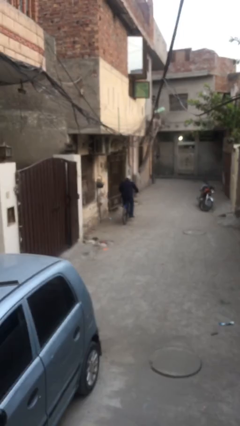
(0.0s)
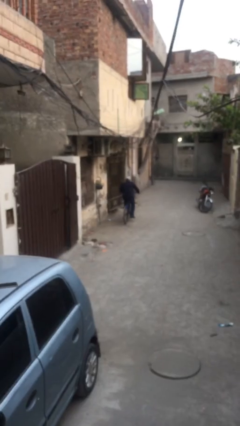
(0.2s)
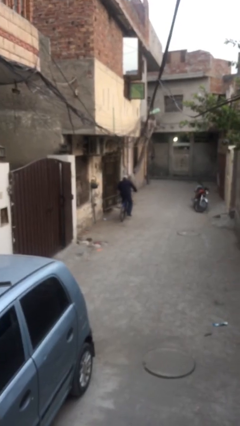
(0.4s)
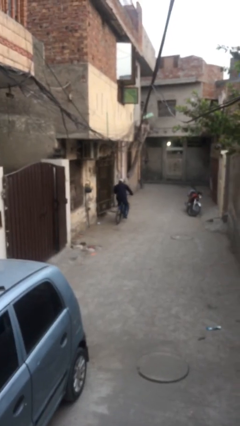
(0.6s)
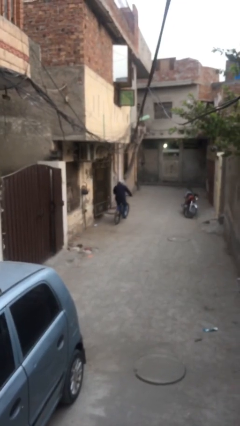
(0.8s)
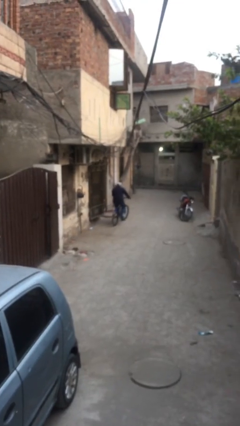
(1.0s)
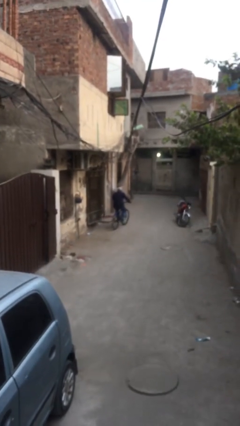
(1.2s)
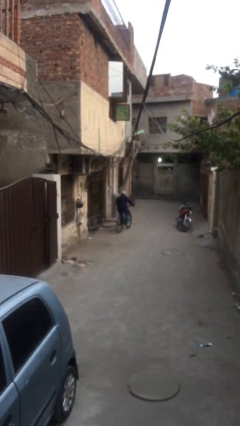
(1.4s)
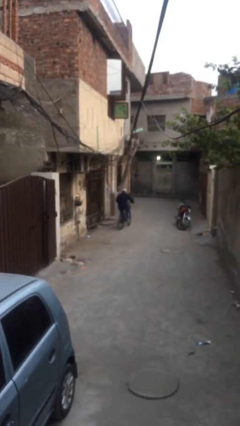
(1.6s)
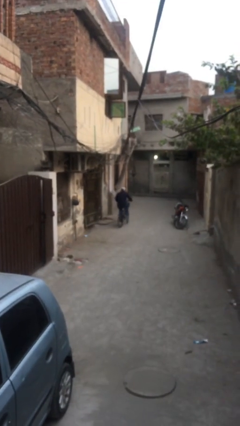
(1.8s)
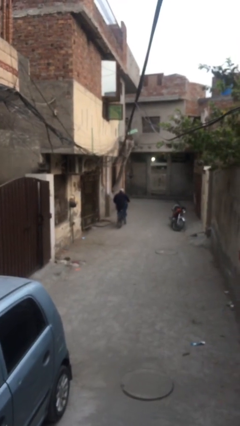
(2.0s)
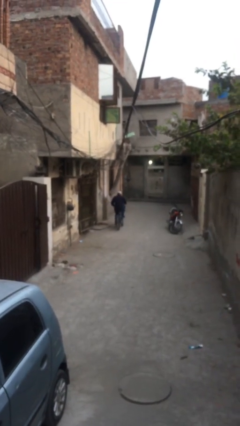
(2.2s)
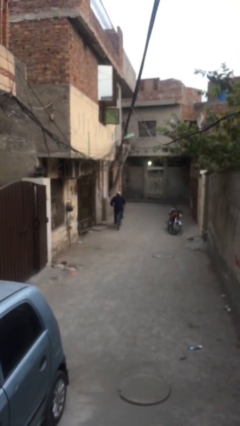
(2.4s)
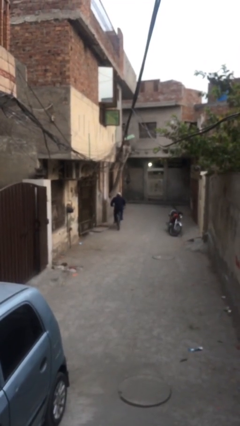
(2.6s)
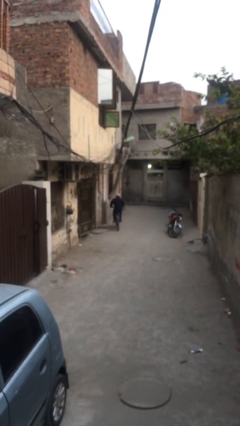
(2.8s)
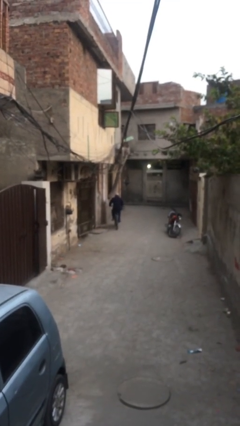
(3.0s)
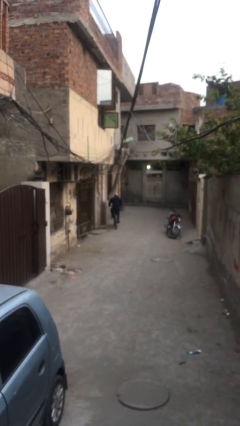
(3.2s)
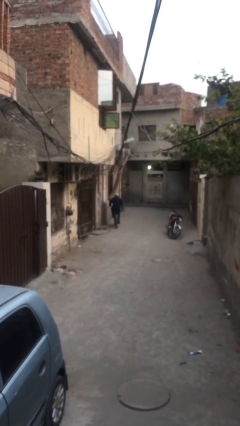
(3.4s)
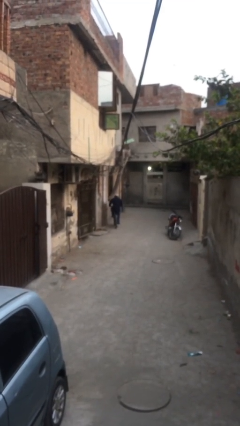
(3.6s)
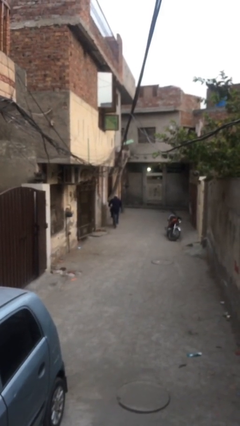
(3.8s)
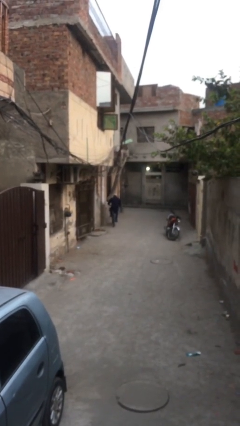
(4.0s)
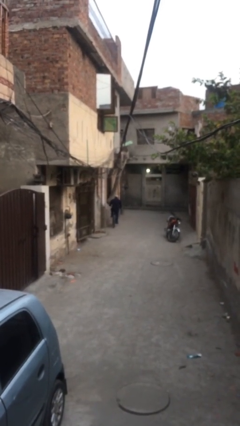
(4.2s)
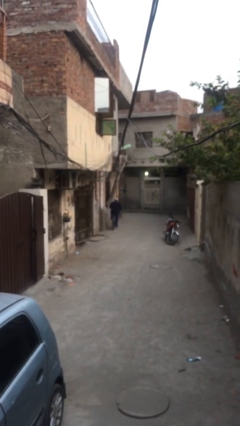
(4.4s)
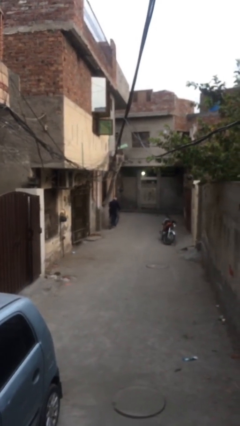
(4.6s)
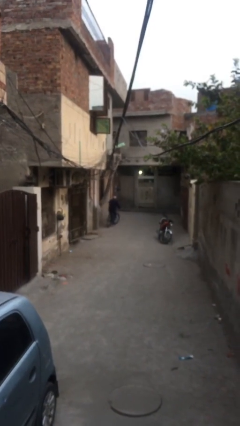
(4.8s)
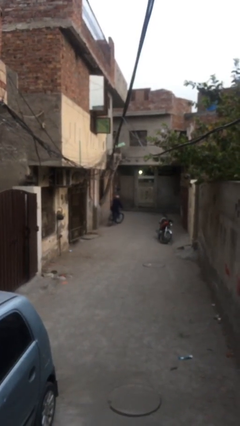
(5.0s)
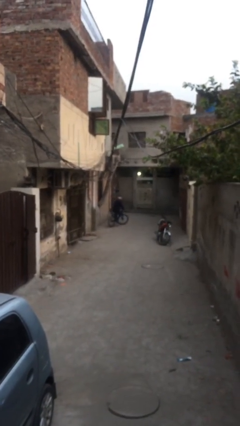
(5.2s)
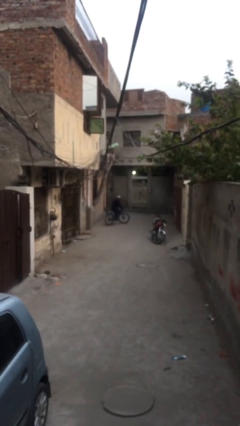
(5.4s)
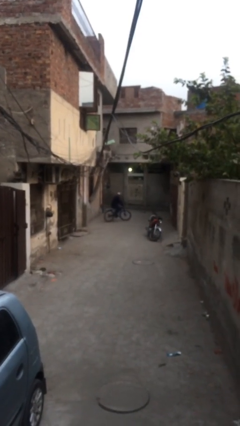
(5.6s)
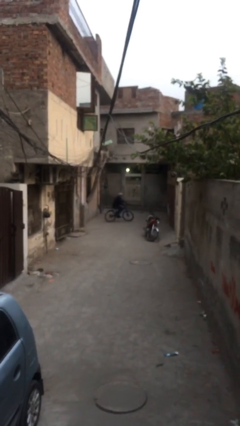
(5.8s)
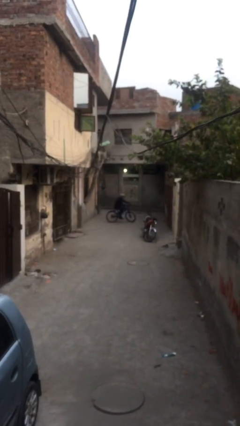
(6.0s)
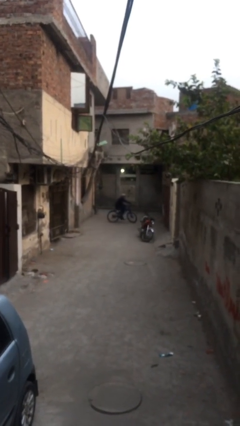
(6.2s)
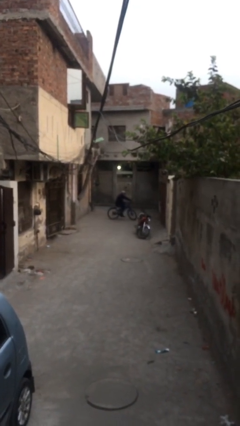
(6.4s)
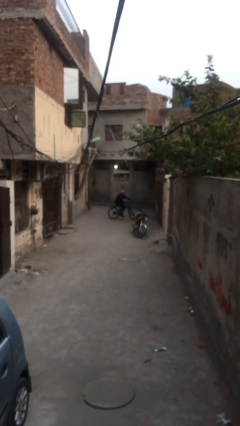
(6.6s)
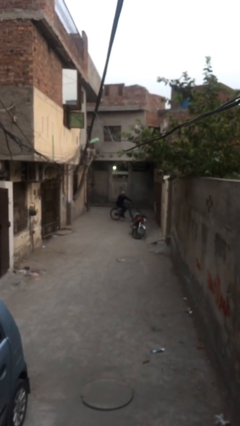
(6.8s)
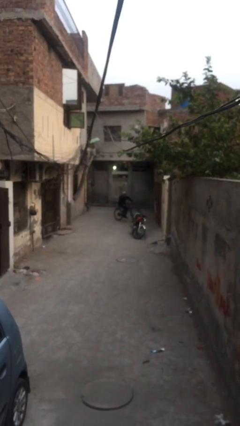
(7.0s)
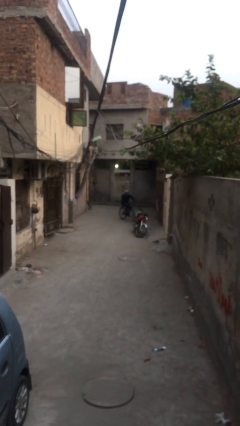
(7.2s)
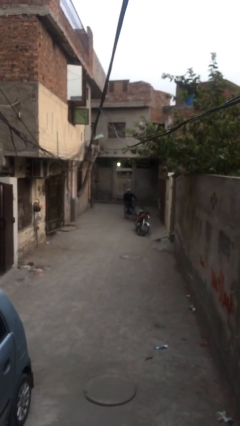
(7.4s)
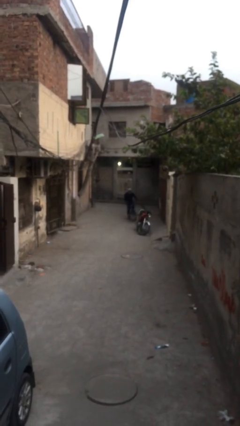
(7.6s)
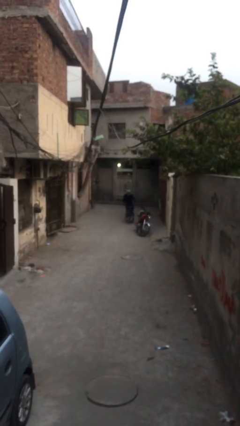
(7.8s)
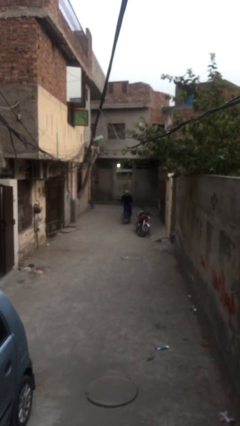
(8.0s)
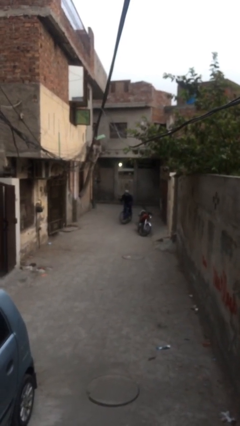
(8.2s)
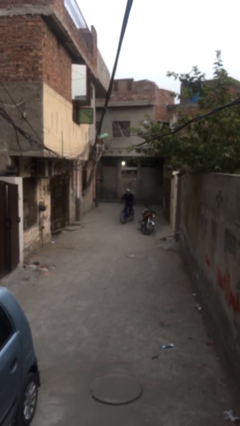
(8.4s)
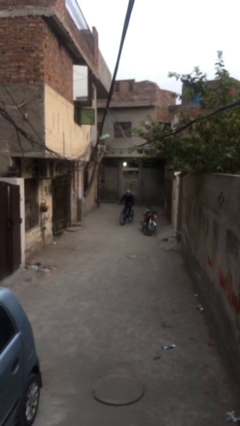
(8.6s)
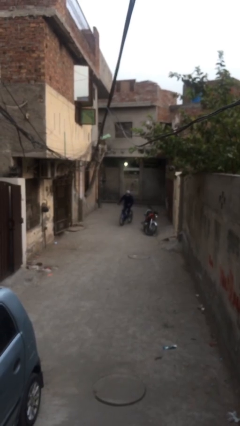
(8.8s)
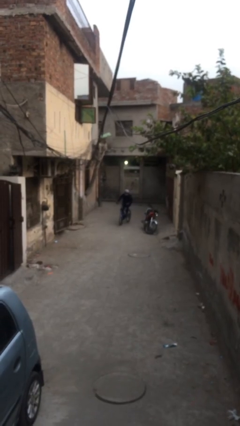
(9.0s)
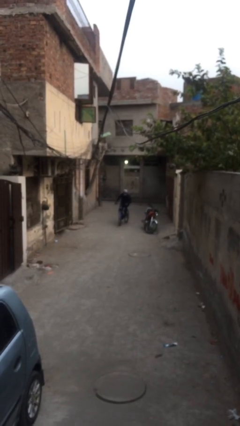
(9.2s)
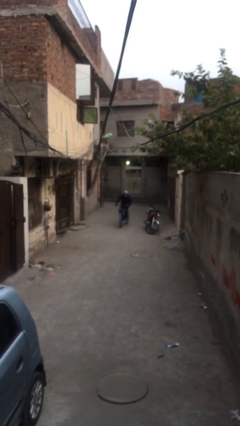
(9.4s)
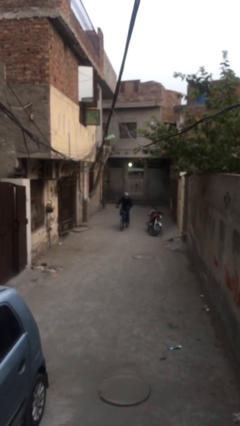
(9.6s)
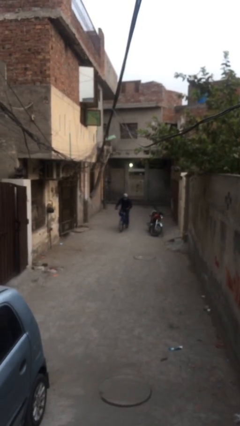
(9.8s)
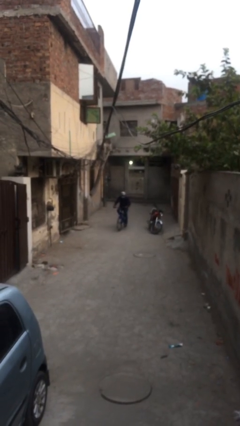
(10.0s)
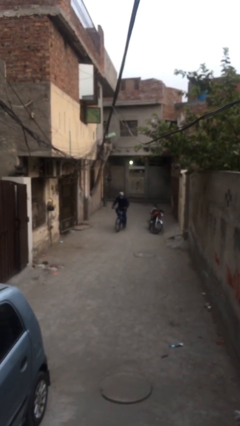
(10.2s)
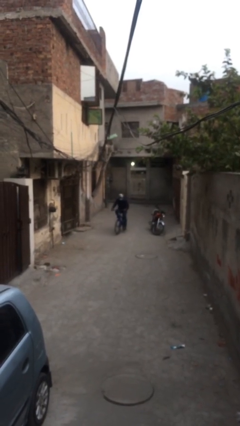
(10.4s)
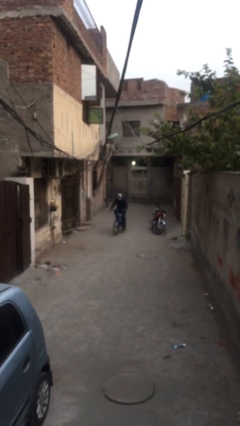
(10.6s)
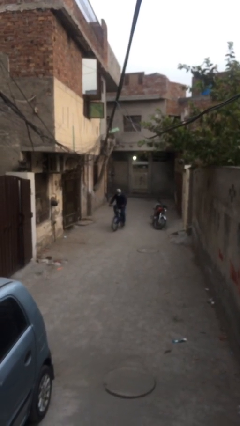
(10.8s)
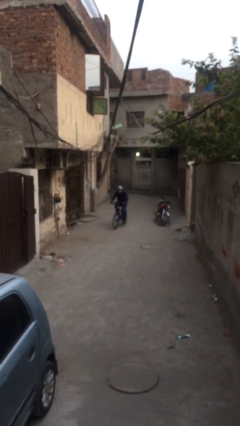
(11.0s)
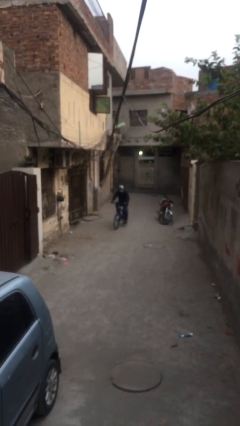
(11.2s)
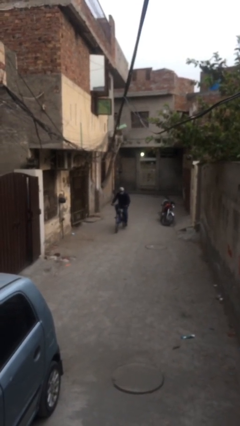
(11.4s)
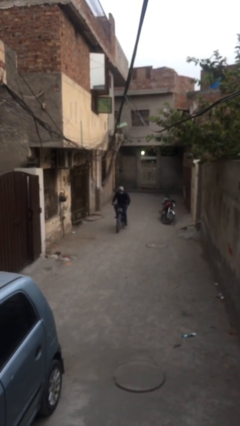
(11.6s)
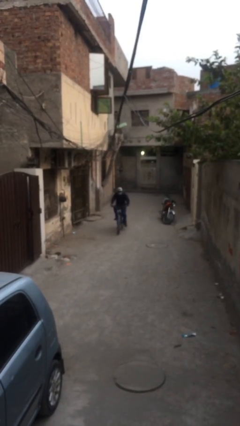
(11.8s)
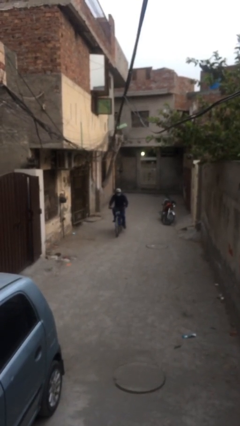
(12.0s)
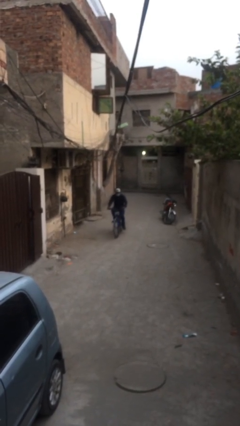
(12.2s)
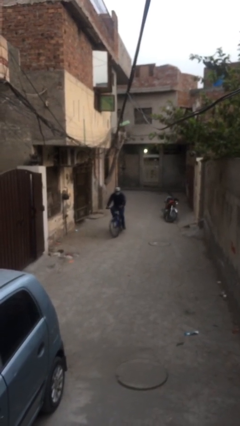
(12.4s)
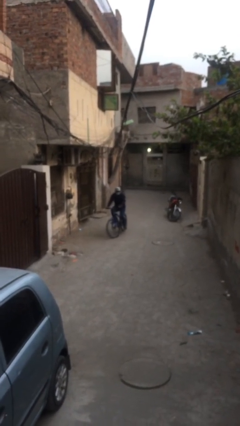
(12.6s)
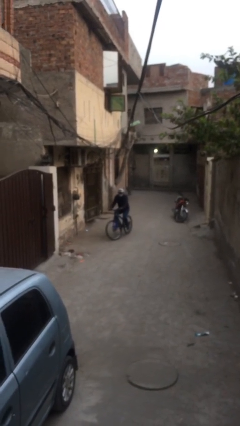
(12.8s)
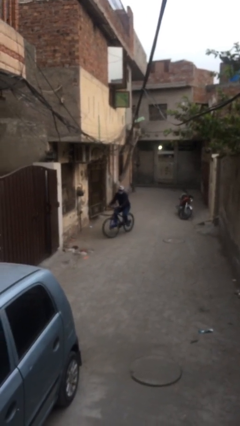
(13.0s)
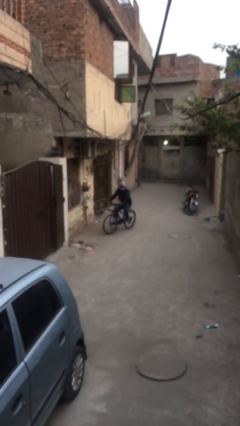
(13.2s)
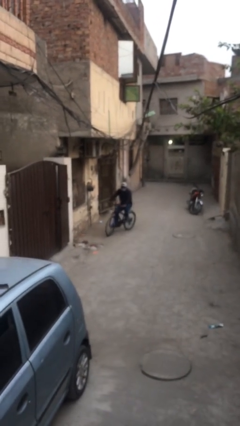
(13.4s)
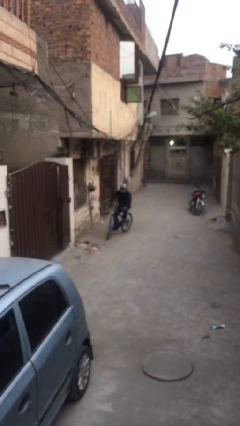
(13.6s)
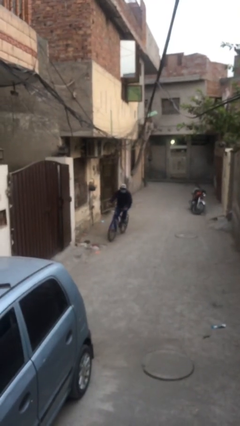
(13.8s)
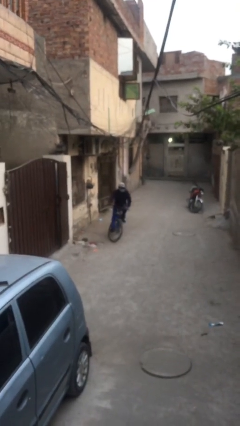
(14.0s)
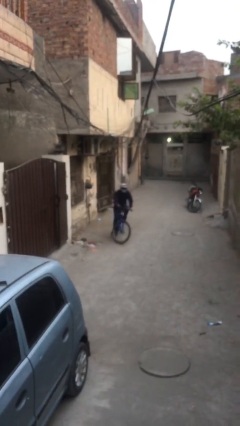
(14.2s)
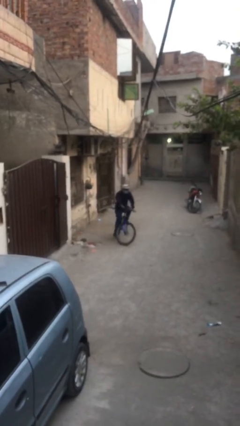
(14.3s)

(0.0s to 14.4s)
person rides bicycle

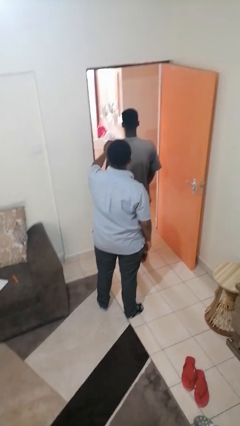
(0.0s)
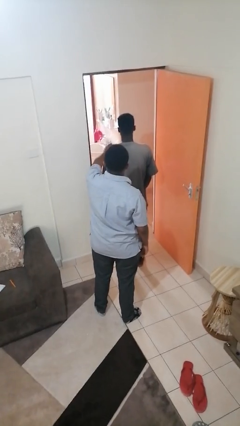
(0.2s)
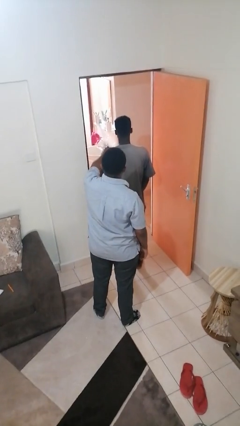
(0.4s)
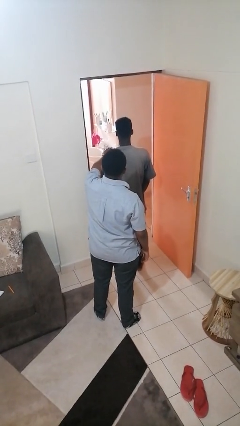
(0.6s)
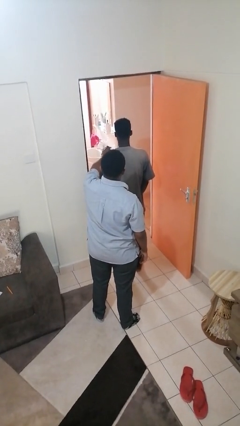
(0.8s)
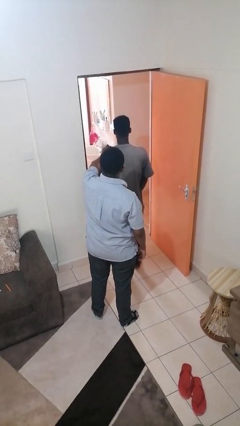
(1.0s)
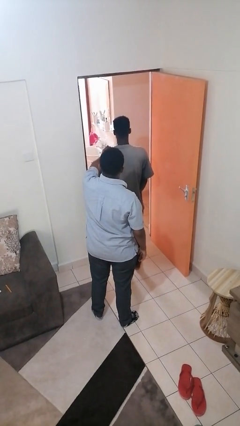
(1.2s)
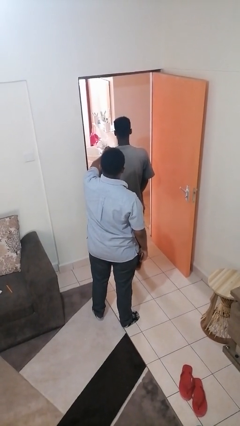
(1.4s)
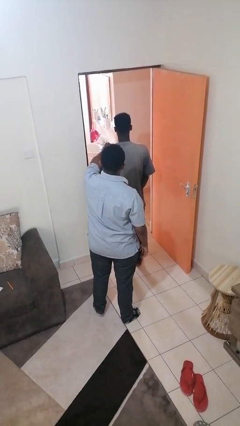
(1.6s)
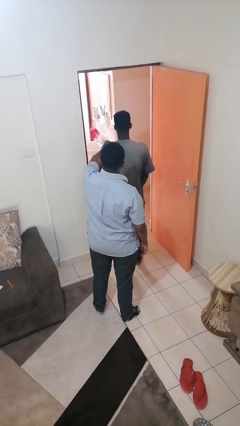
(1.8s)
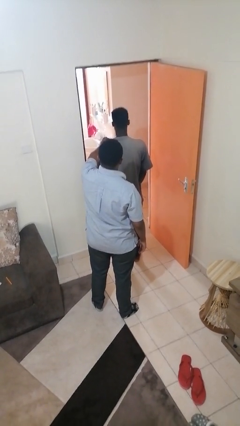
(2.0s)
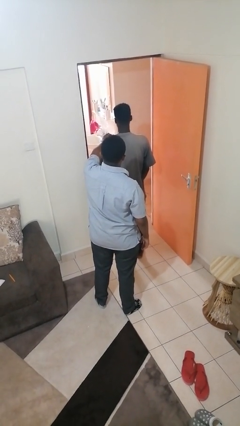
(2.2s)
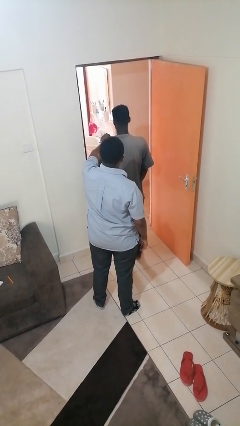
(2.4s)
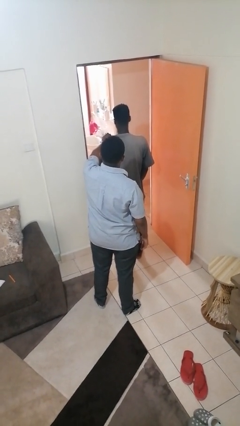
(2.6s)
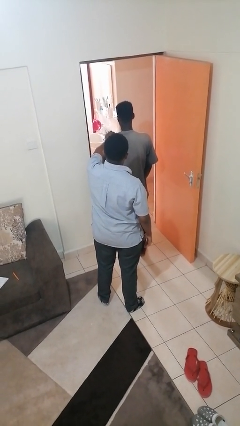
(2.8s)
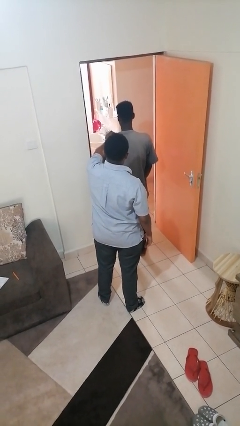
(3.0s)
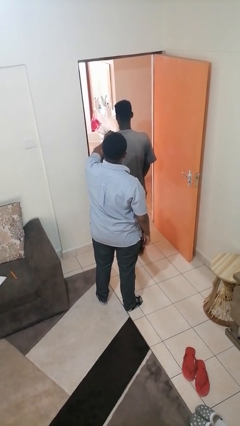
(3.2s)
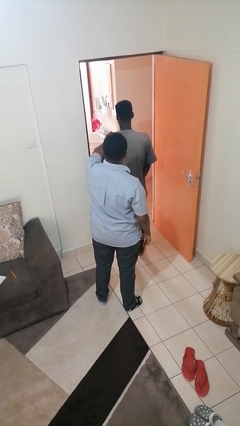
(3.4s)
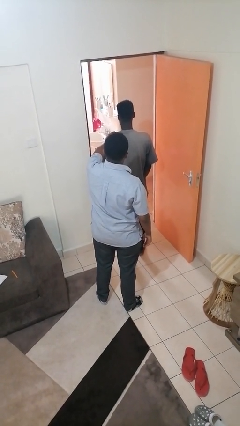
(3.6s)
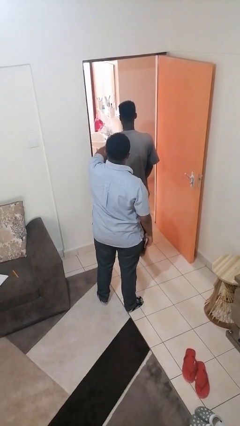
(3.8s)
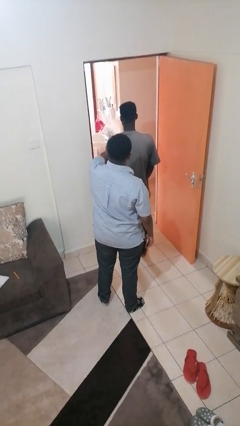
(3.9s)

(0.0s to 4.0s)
person touches back of person
